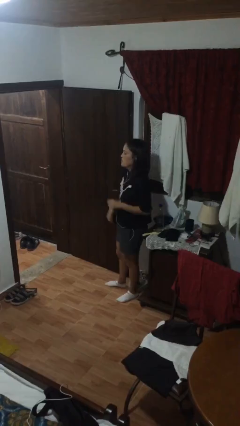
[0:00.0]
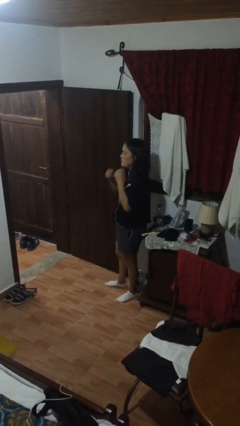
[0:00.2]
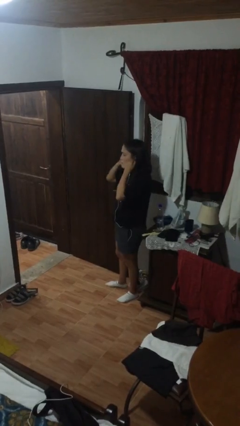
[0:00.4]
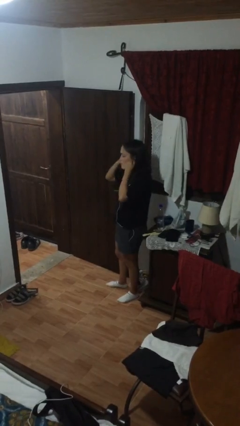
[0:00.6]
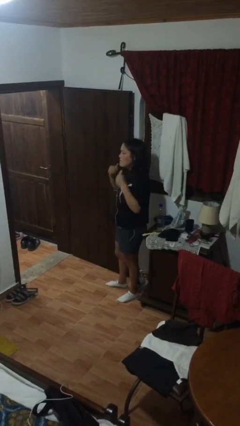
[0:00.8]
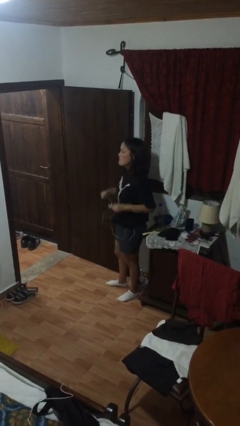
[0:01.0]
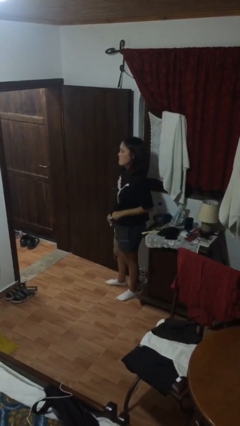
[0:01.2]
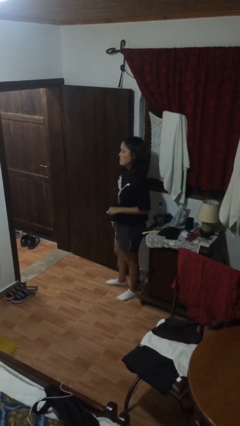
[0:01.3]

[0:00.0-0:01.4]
person takes off headphones

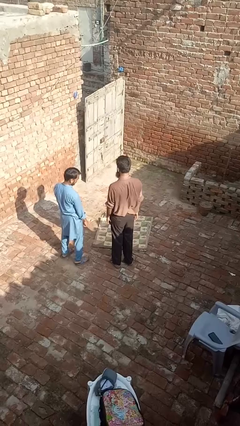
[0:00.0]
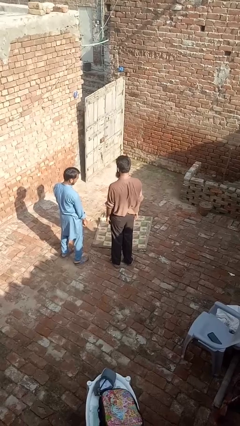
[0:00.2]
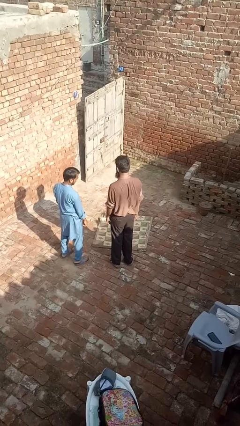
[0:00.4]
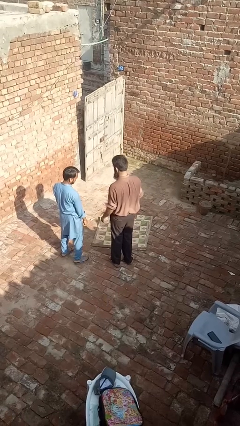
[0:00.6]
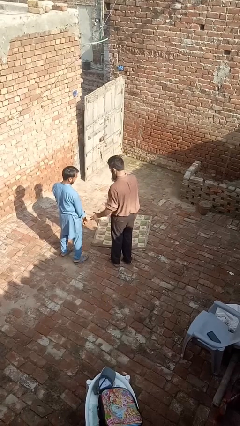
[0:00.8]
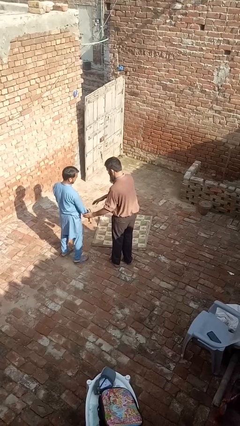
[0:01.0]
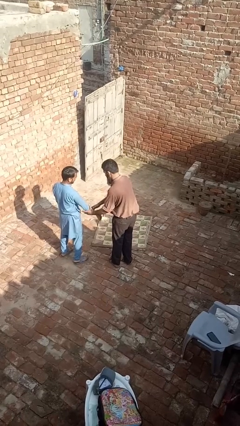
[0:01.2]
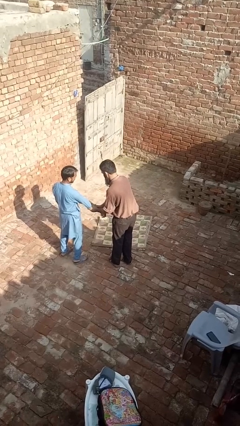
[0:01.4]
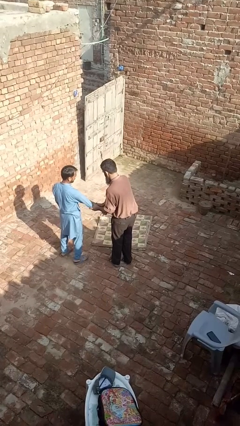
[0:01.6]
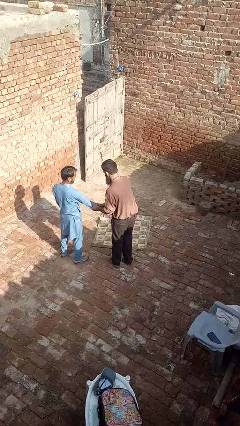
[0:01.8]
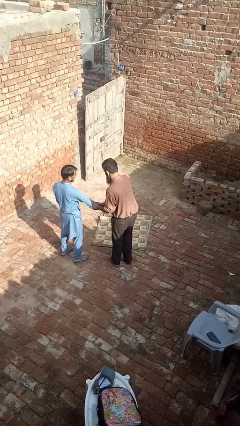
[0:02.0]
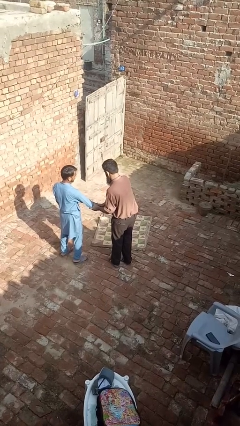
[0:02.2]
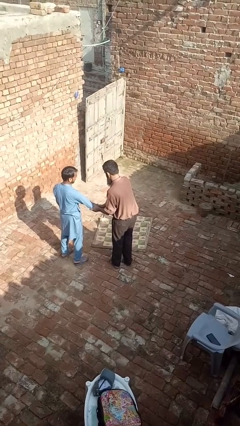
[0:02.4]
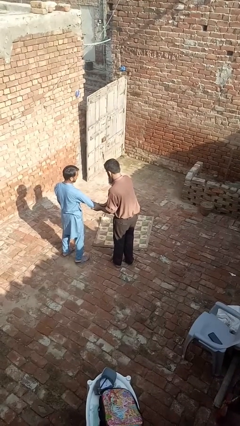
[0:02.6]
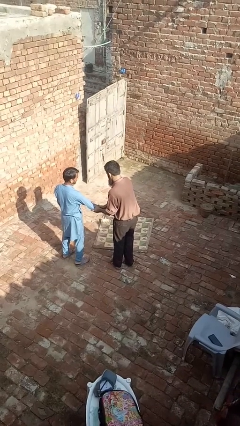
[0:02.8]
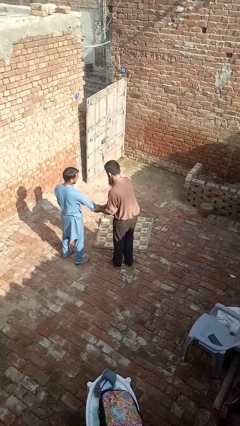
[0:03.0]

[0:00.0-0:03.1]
person grabs person by forearm

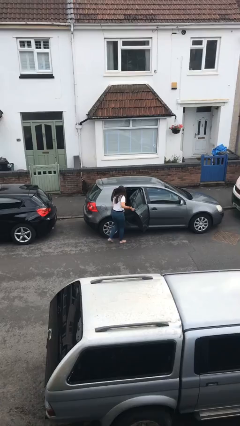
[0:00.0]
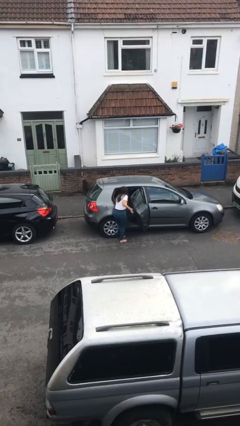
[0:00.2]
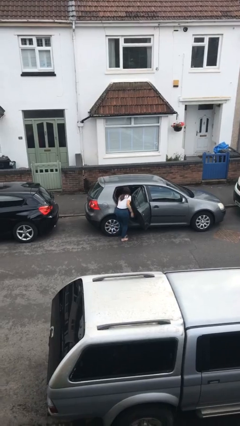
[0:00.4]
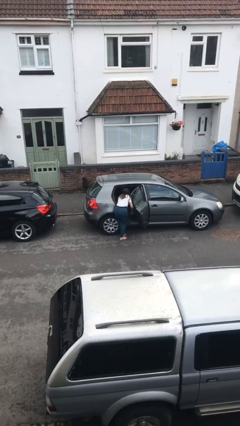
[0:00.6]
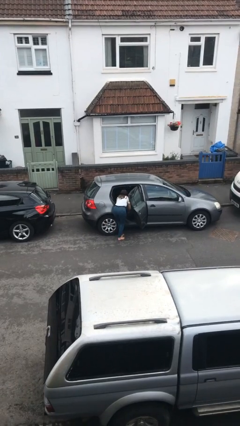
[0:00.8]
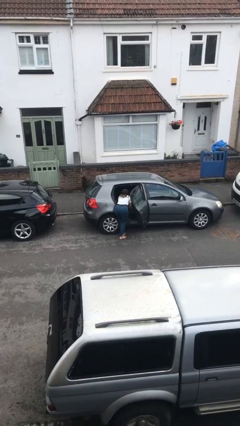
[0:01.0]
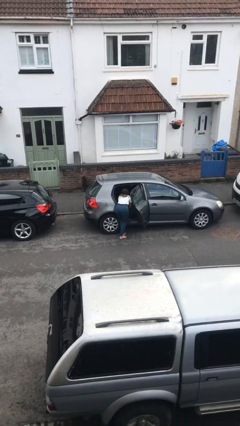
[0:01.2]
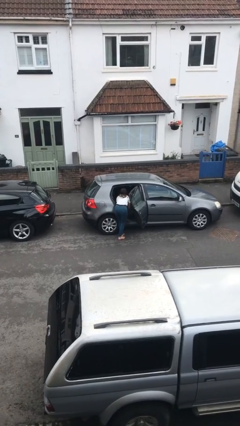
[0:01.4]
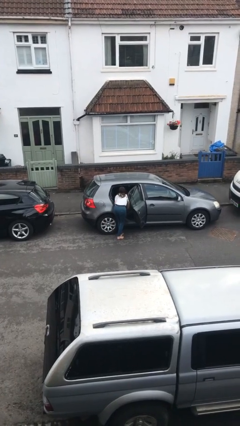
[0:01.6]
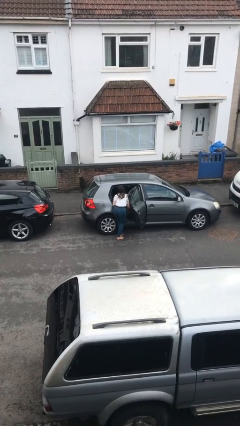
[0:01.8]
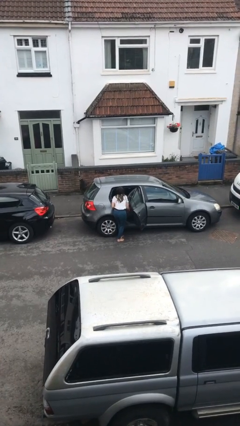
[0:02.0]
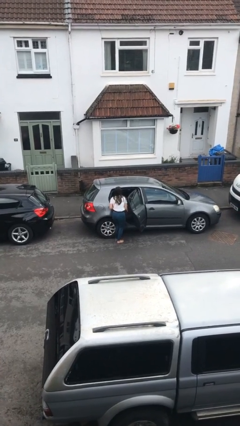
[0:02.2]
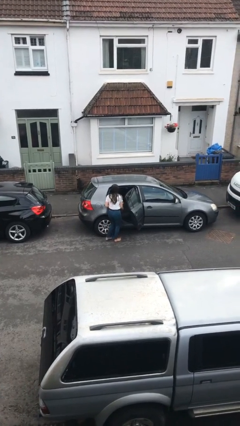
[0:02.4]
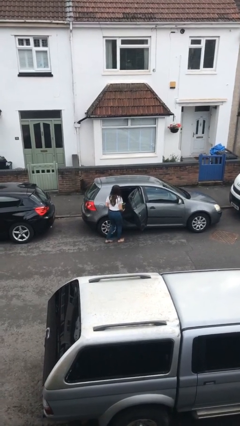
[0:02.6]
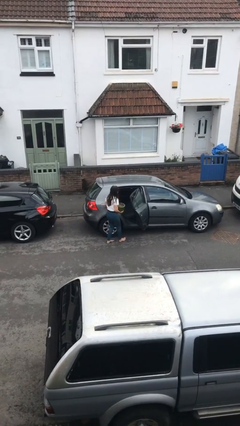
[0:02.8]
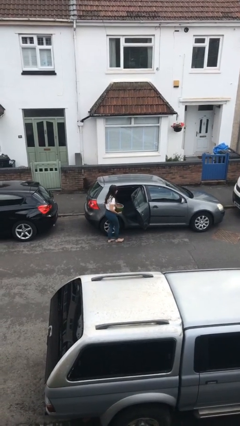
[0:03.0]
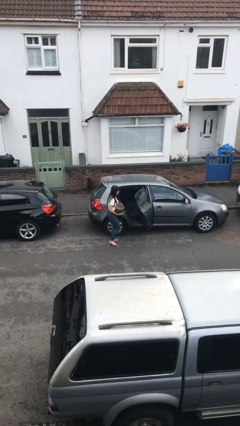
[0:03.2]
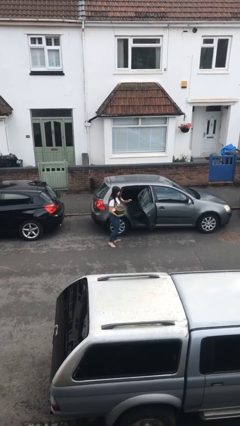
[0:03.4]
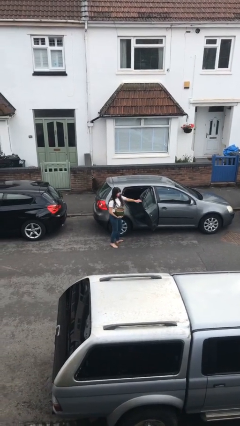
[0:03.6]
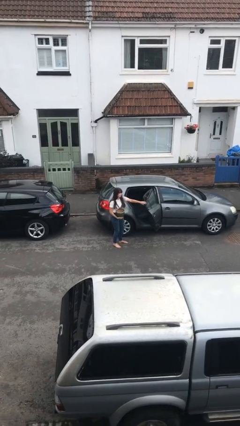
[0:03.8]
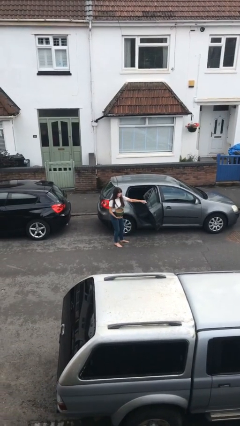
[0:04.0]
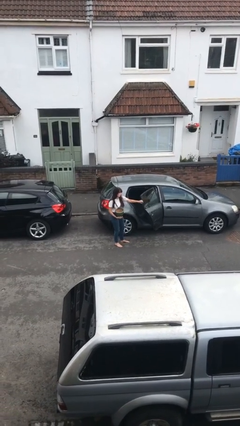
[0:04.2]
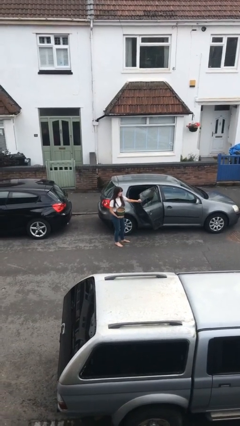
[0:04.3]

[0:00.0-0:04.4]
person unloads car

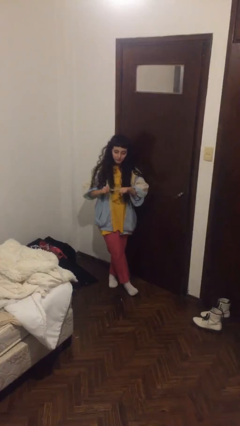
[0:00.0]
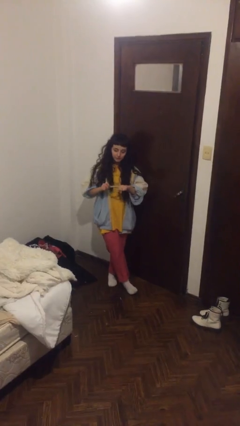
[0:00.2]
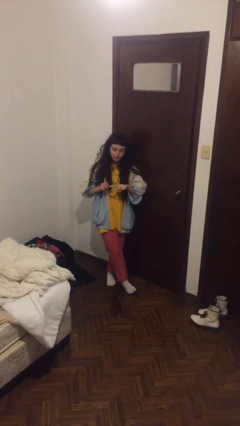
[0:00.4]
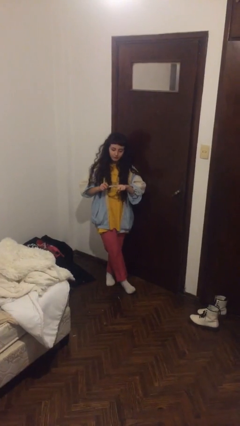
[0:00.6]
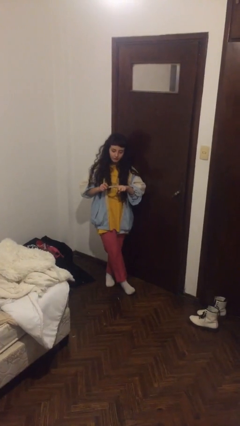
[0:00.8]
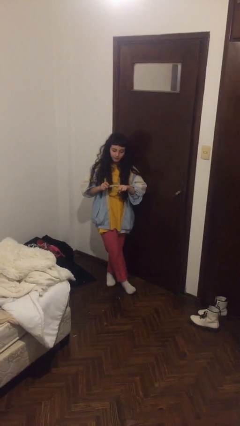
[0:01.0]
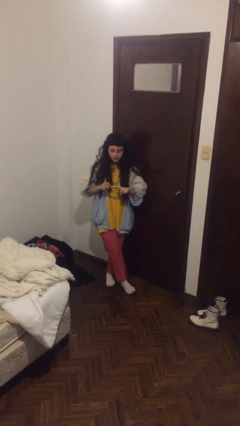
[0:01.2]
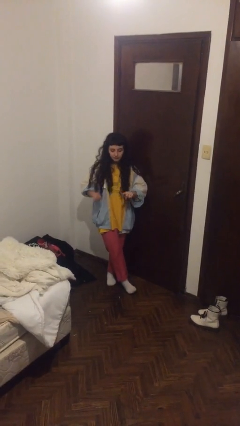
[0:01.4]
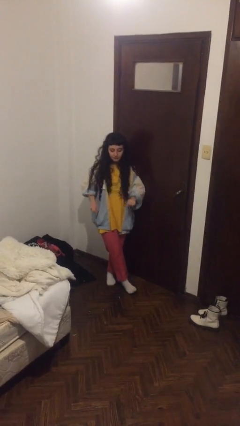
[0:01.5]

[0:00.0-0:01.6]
person files fingernails

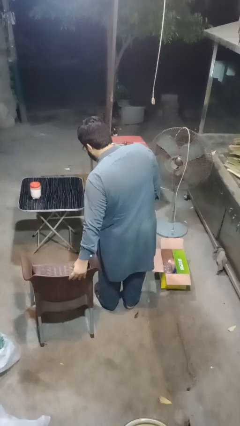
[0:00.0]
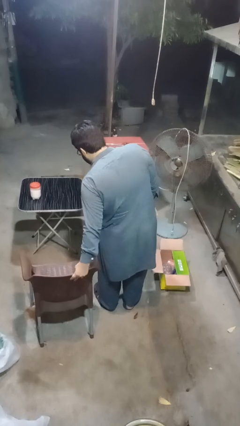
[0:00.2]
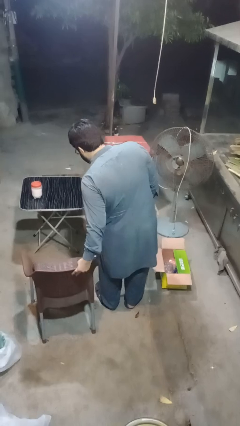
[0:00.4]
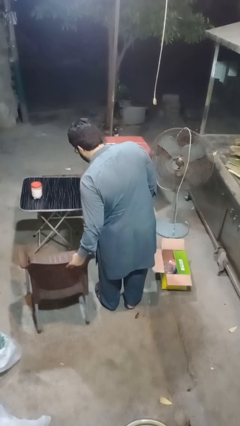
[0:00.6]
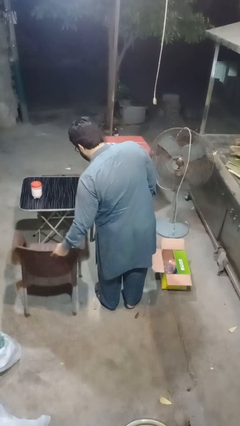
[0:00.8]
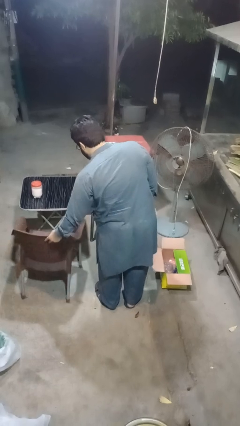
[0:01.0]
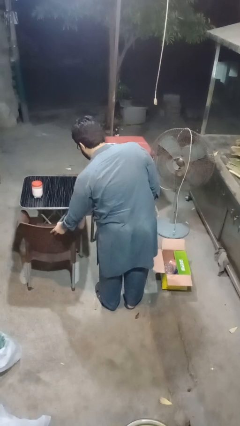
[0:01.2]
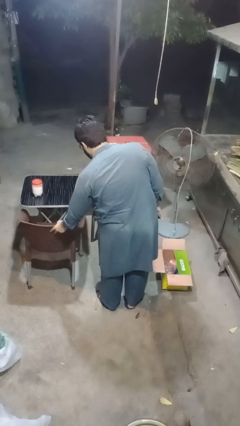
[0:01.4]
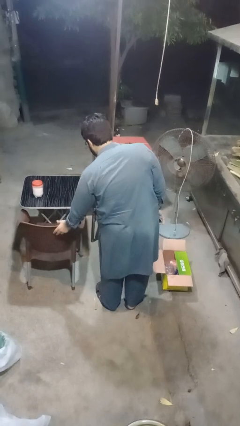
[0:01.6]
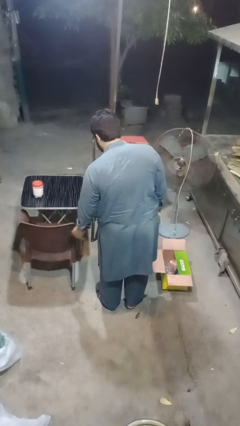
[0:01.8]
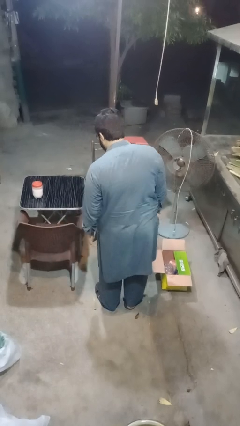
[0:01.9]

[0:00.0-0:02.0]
person pushes in chair

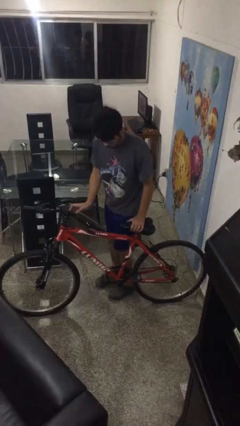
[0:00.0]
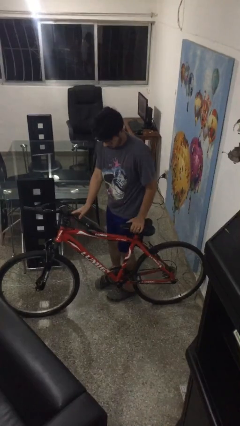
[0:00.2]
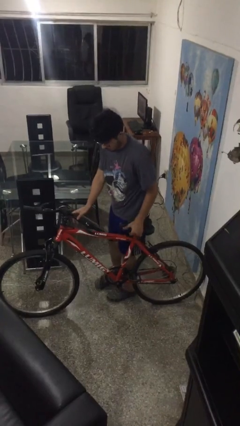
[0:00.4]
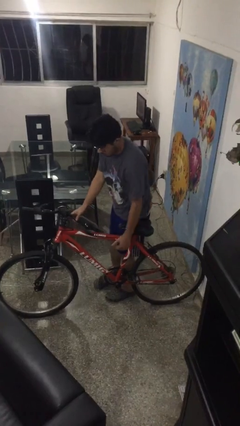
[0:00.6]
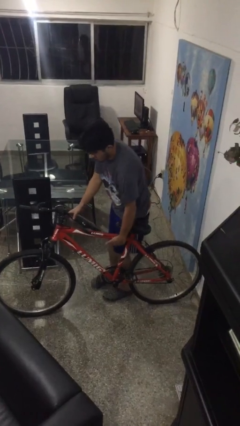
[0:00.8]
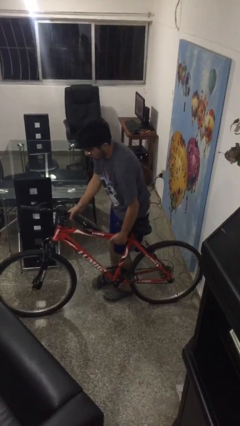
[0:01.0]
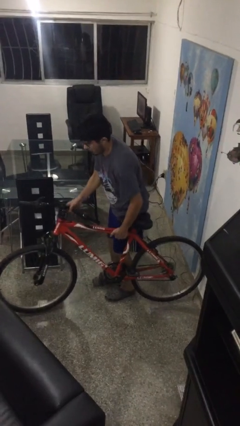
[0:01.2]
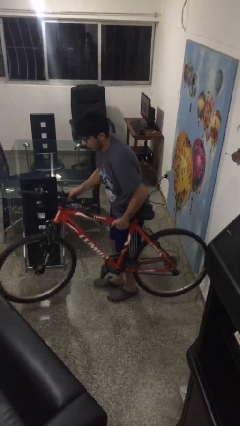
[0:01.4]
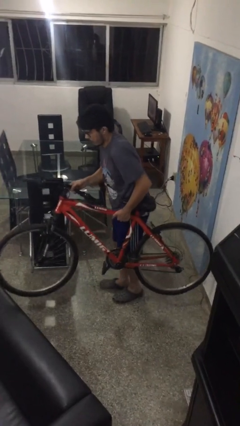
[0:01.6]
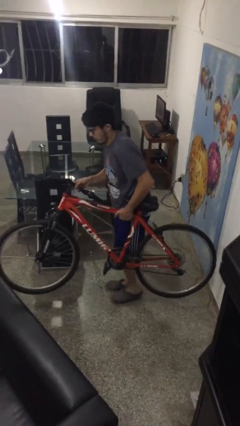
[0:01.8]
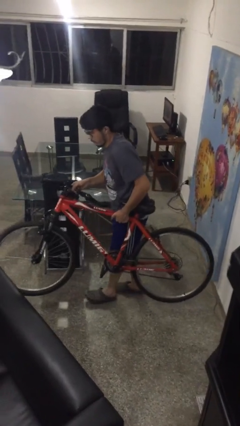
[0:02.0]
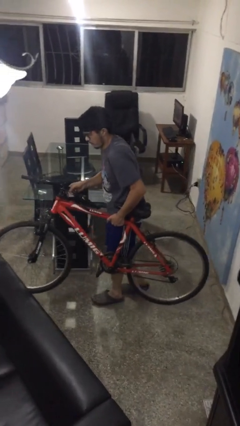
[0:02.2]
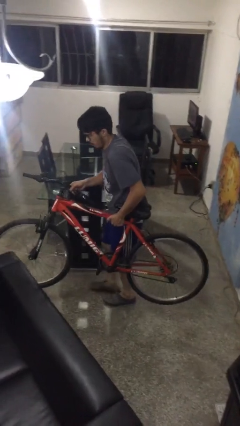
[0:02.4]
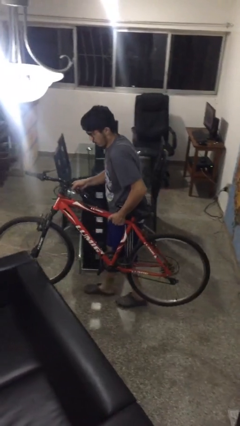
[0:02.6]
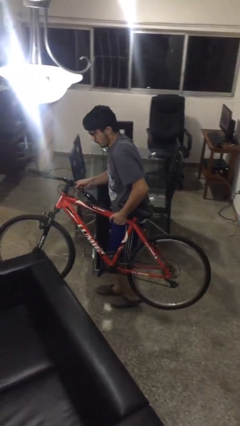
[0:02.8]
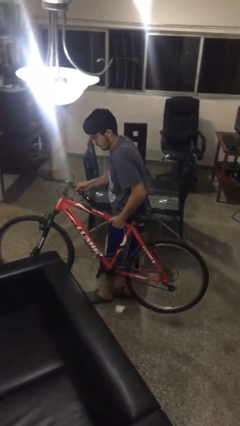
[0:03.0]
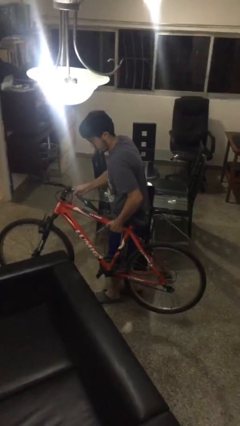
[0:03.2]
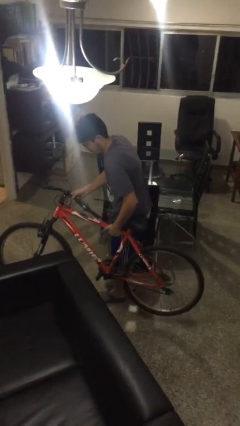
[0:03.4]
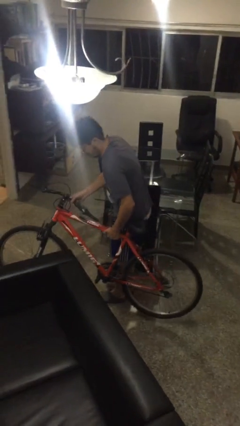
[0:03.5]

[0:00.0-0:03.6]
person carries bicycle

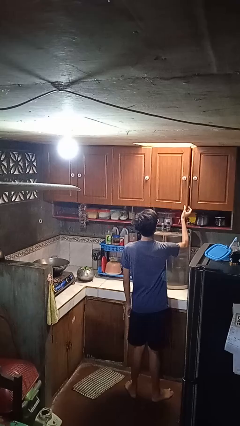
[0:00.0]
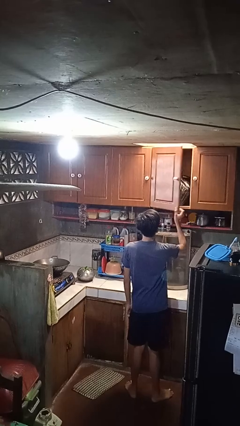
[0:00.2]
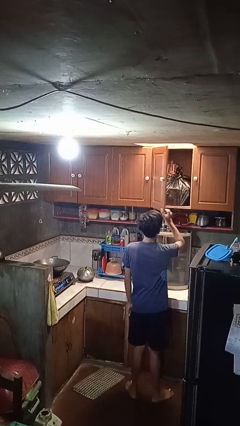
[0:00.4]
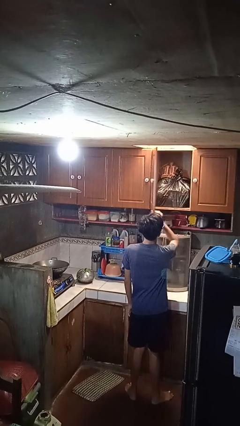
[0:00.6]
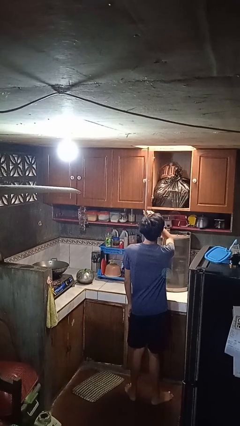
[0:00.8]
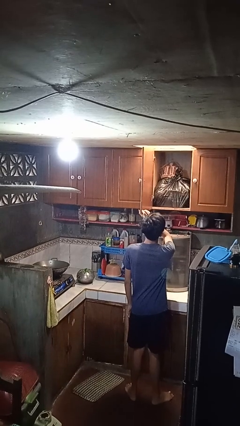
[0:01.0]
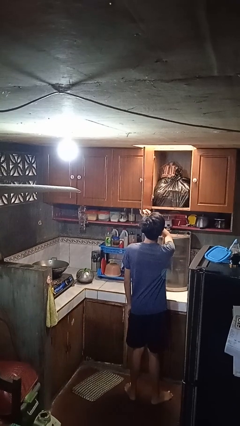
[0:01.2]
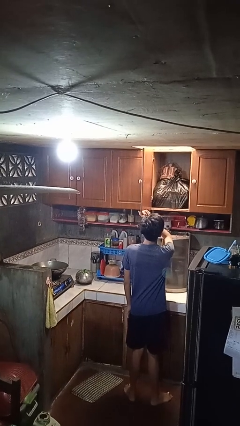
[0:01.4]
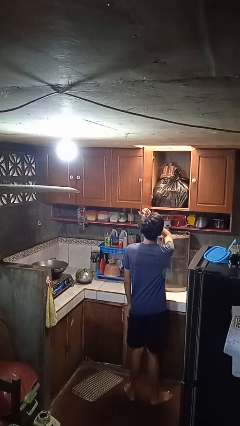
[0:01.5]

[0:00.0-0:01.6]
person opens cabinet
